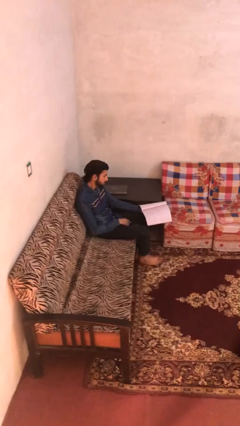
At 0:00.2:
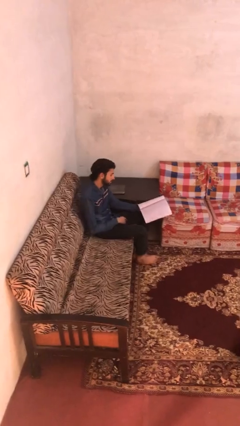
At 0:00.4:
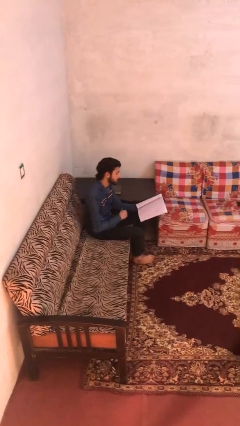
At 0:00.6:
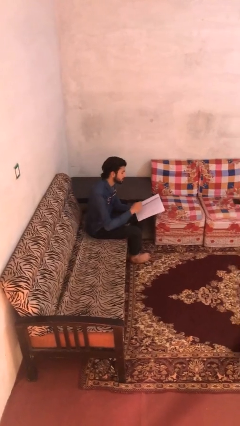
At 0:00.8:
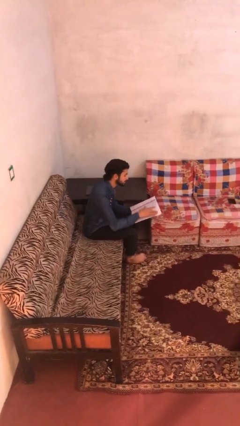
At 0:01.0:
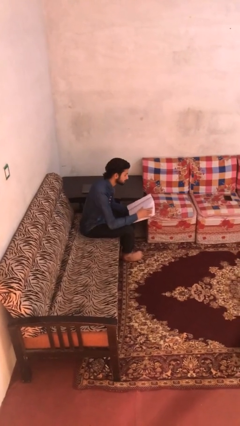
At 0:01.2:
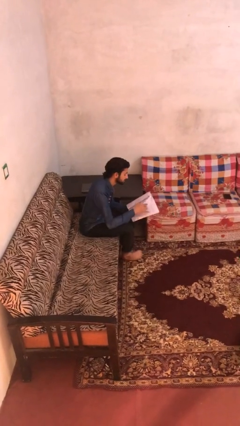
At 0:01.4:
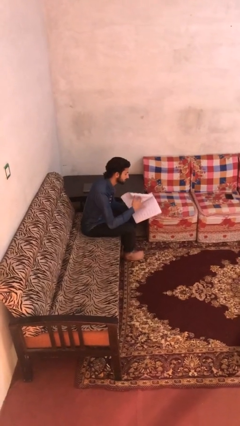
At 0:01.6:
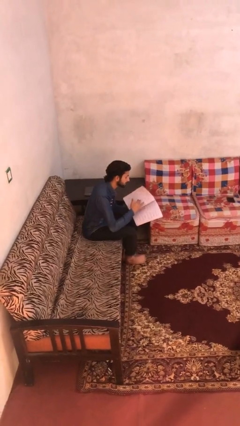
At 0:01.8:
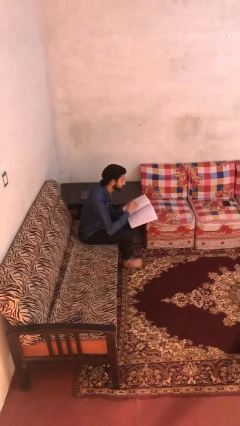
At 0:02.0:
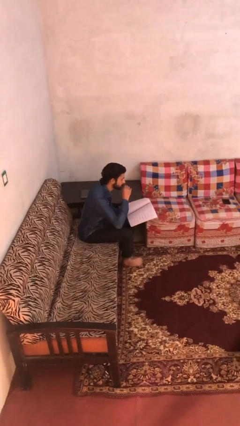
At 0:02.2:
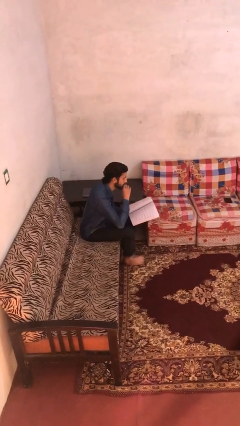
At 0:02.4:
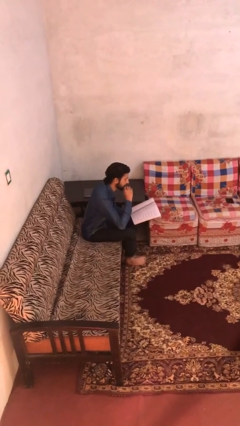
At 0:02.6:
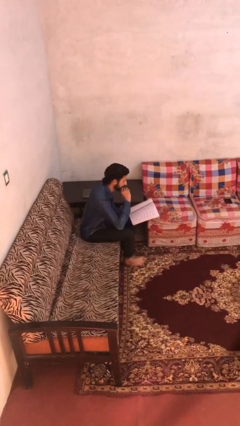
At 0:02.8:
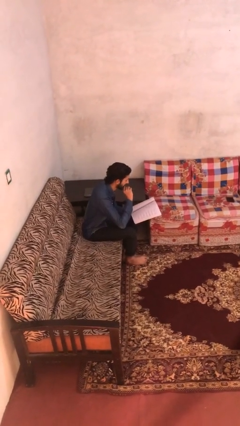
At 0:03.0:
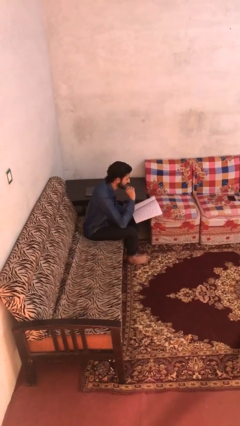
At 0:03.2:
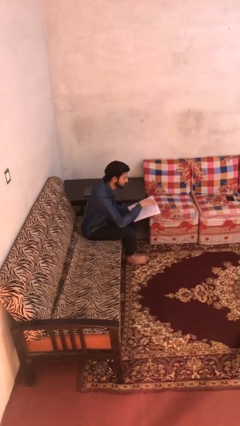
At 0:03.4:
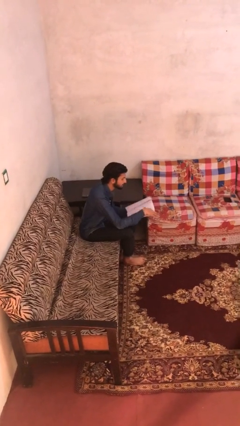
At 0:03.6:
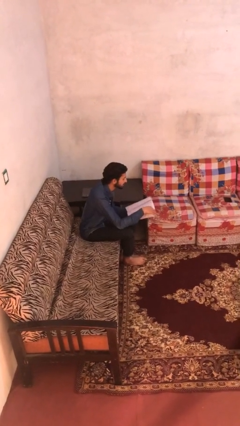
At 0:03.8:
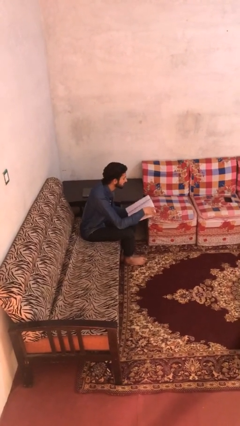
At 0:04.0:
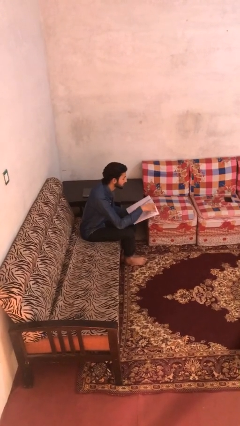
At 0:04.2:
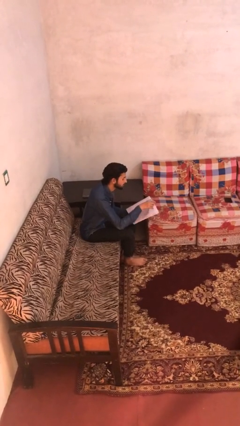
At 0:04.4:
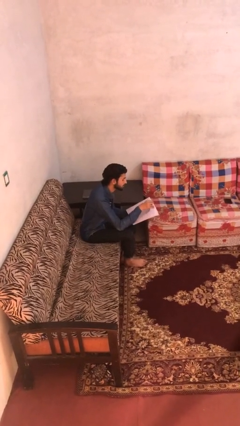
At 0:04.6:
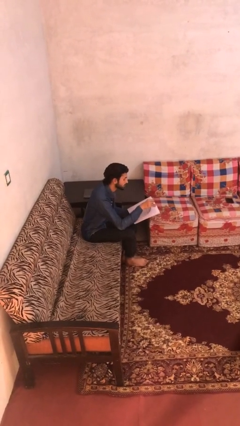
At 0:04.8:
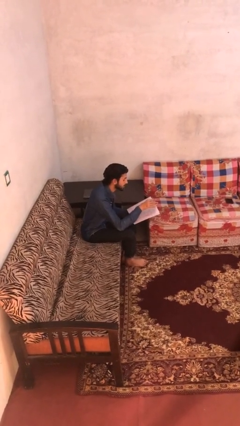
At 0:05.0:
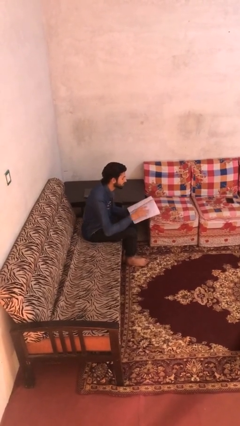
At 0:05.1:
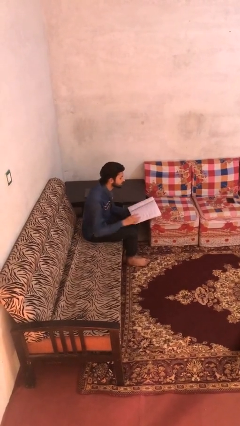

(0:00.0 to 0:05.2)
person reads document

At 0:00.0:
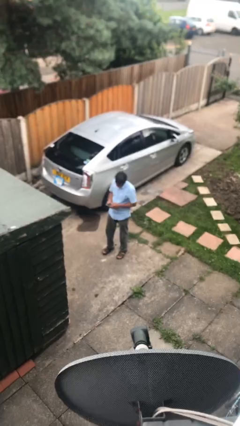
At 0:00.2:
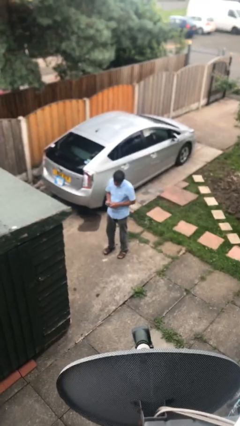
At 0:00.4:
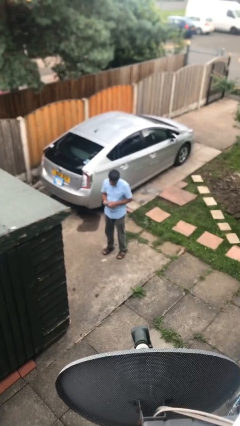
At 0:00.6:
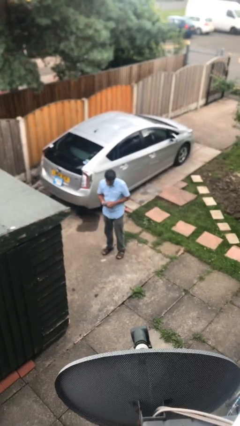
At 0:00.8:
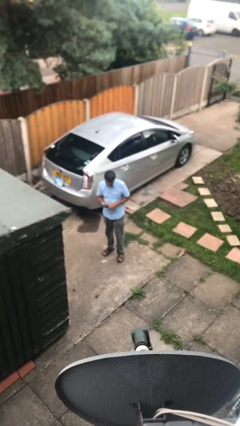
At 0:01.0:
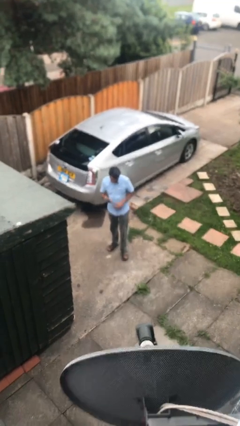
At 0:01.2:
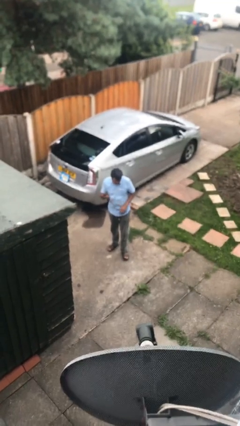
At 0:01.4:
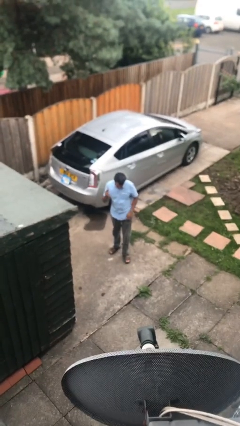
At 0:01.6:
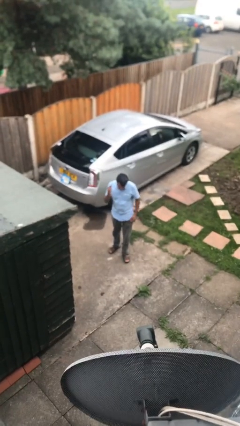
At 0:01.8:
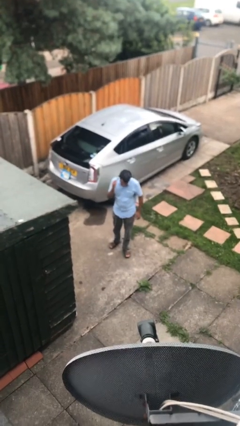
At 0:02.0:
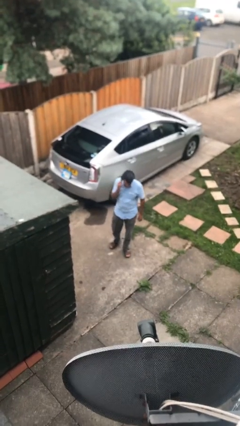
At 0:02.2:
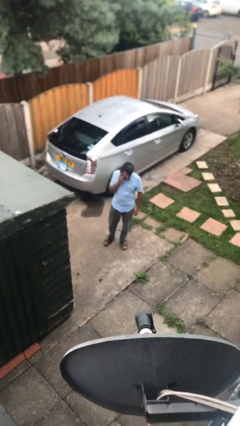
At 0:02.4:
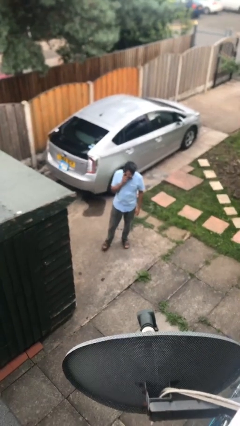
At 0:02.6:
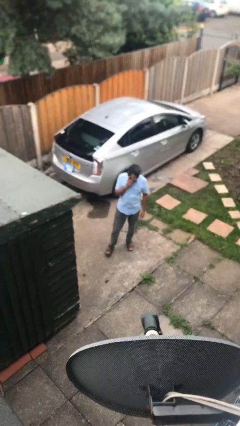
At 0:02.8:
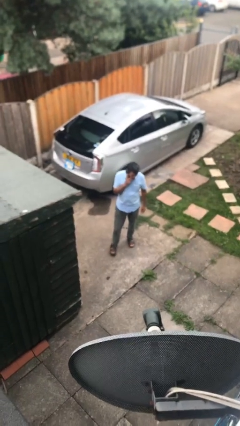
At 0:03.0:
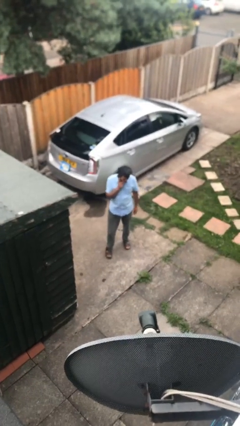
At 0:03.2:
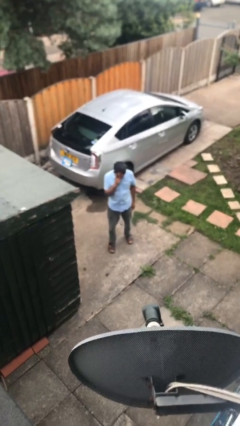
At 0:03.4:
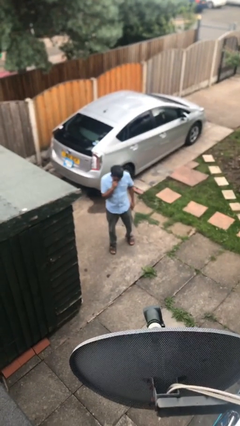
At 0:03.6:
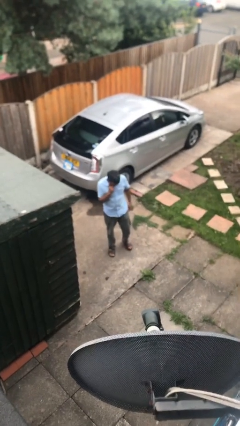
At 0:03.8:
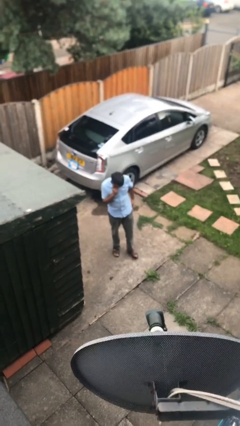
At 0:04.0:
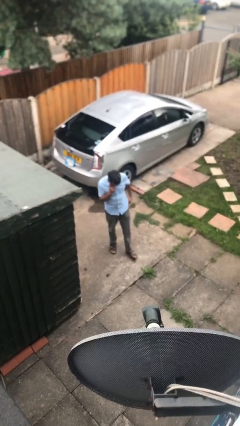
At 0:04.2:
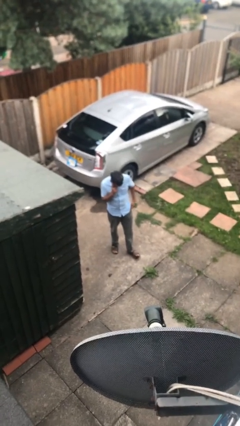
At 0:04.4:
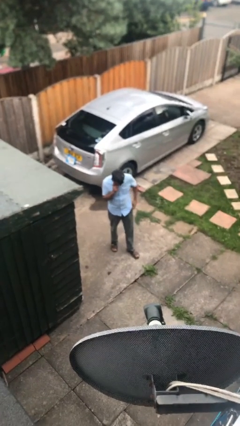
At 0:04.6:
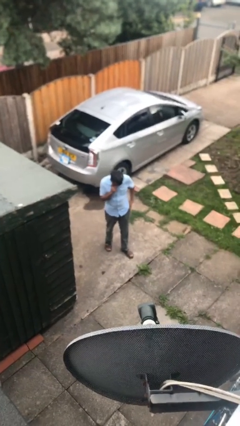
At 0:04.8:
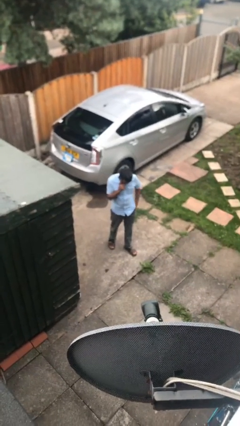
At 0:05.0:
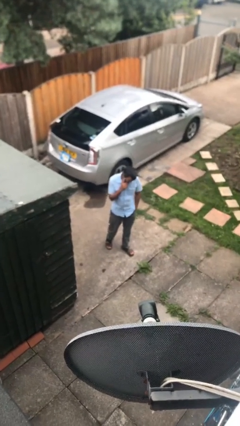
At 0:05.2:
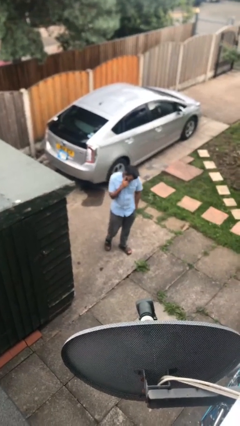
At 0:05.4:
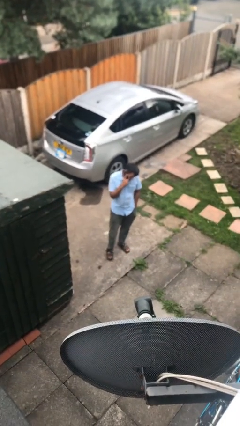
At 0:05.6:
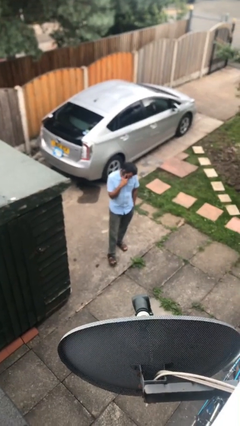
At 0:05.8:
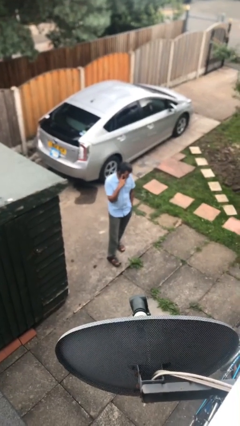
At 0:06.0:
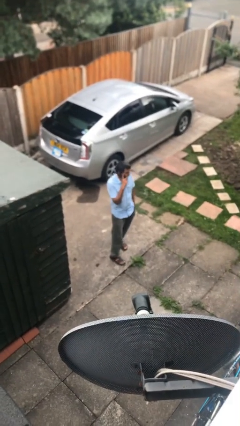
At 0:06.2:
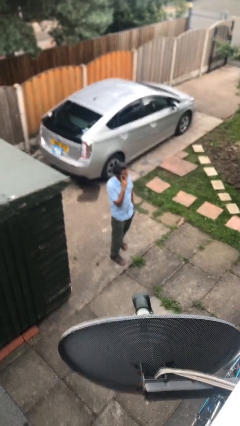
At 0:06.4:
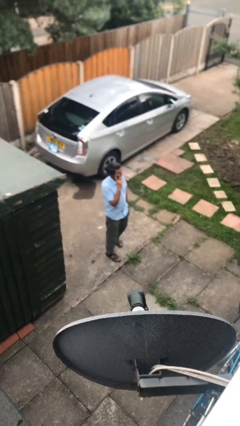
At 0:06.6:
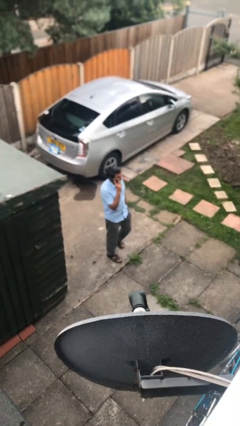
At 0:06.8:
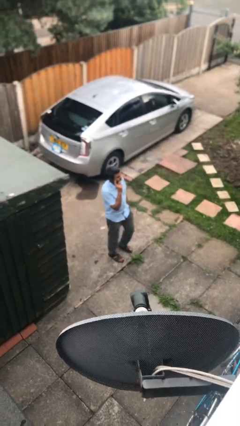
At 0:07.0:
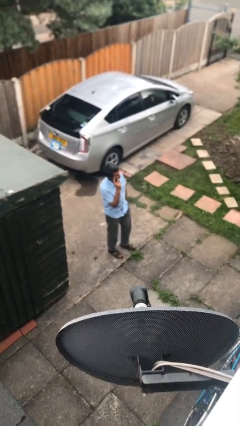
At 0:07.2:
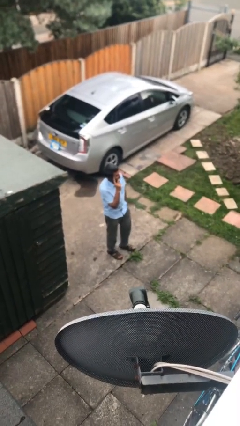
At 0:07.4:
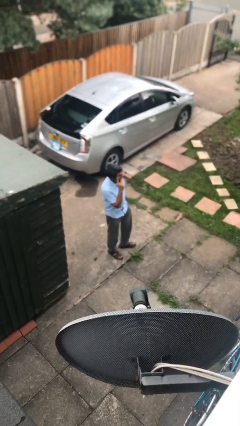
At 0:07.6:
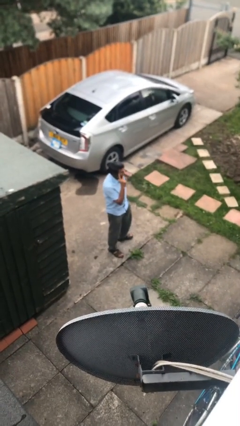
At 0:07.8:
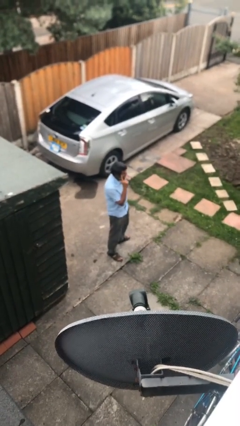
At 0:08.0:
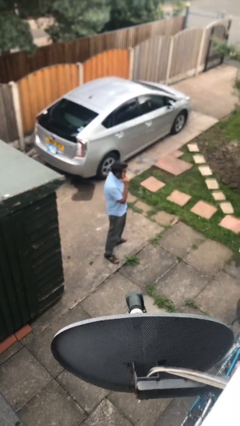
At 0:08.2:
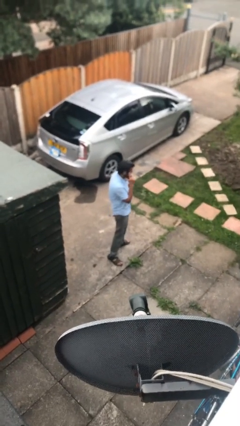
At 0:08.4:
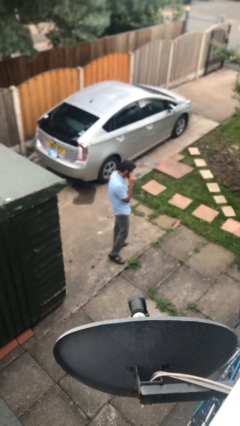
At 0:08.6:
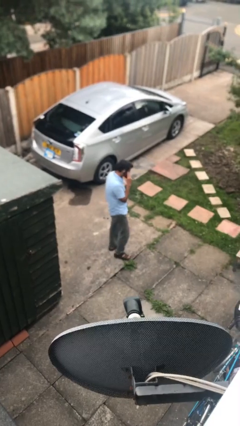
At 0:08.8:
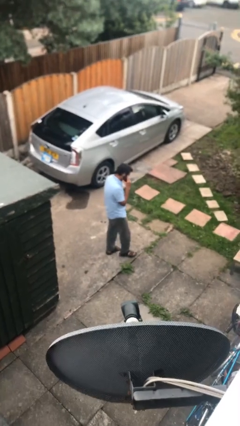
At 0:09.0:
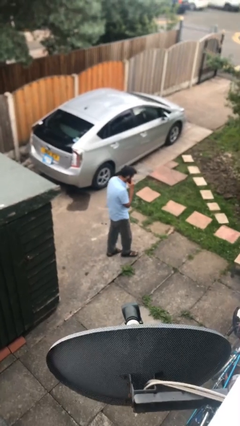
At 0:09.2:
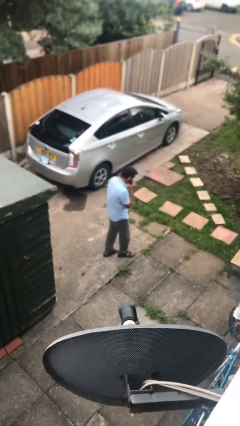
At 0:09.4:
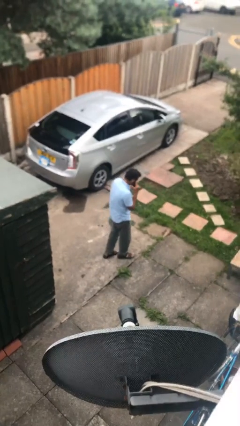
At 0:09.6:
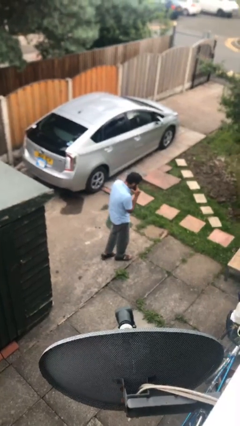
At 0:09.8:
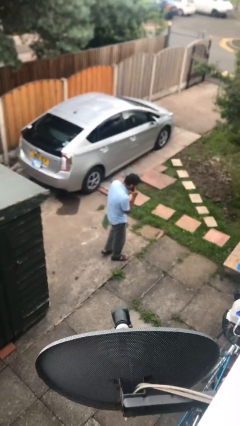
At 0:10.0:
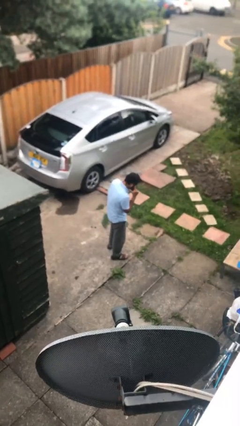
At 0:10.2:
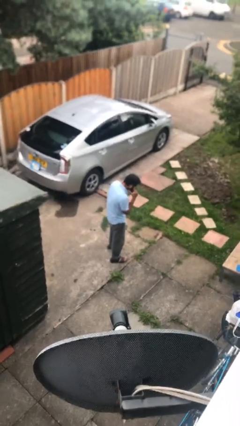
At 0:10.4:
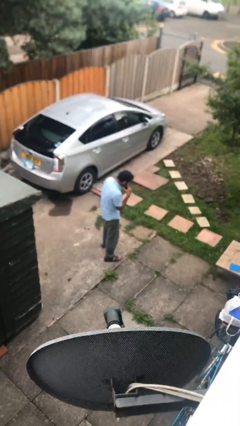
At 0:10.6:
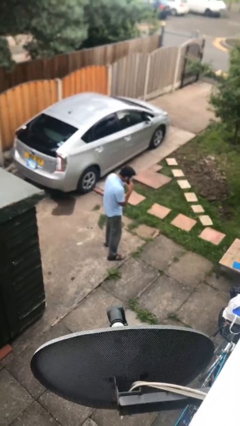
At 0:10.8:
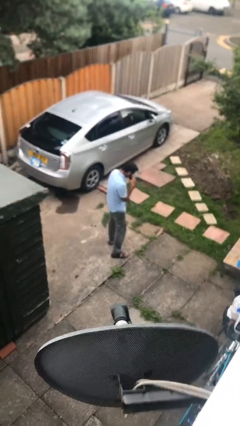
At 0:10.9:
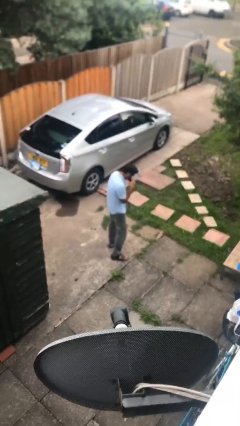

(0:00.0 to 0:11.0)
person talks on phone

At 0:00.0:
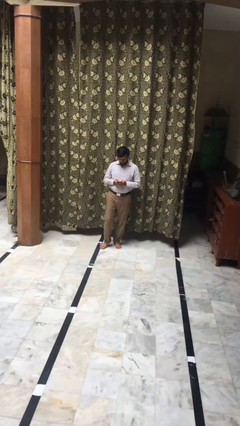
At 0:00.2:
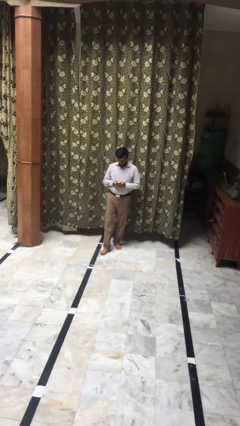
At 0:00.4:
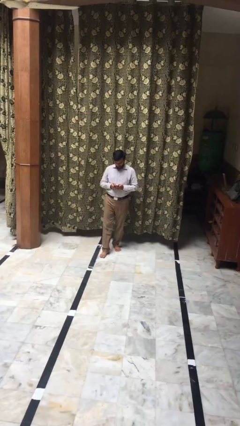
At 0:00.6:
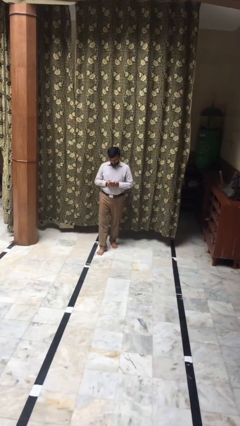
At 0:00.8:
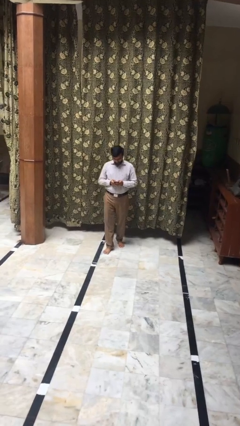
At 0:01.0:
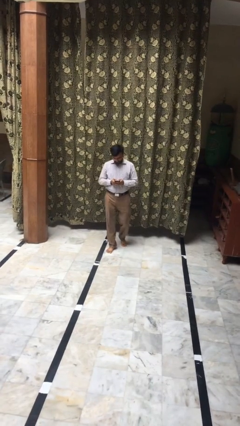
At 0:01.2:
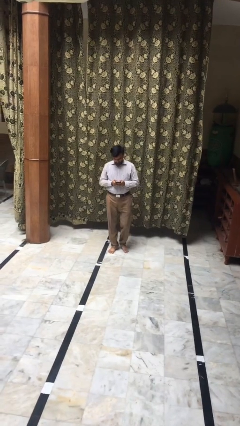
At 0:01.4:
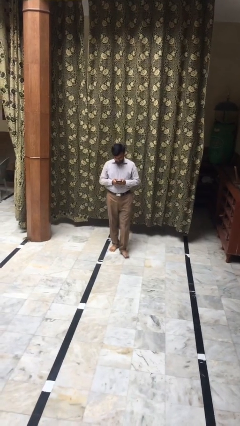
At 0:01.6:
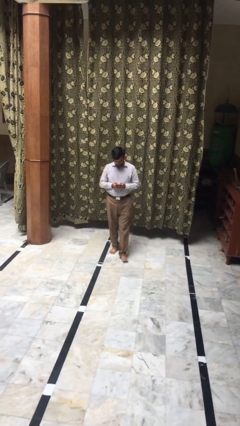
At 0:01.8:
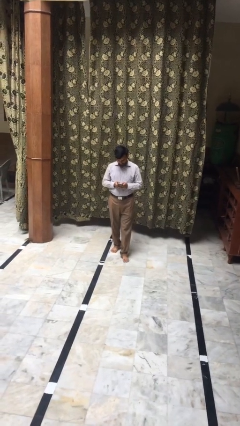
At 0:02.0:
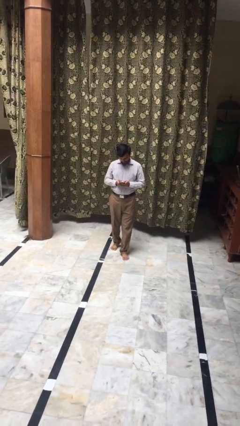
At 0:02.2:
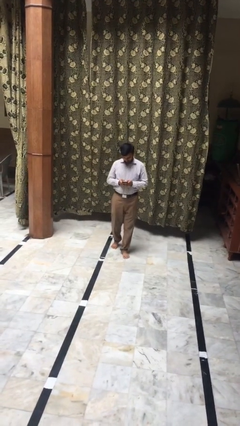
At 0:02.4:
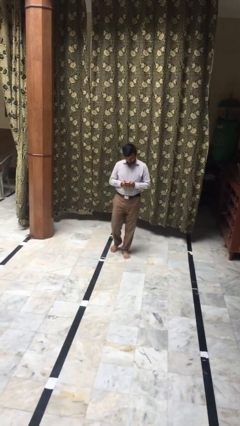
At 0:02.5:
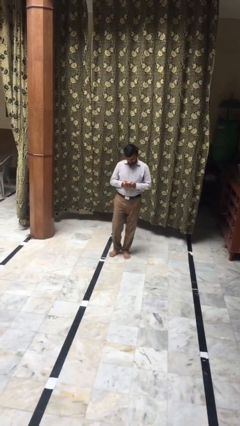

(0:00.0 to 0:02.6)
person texts on phone
